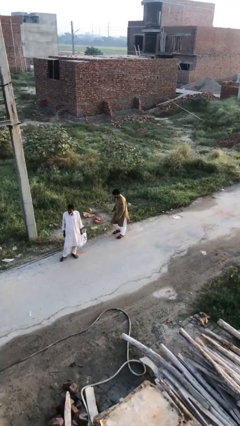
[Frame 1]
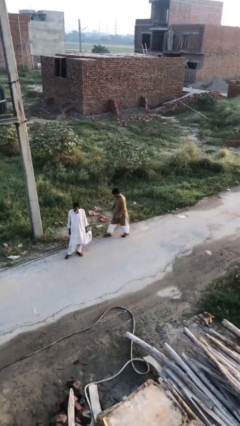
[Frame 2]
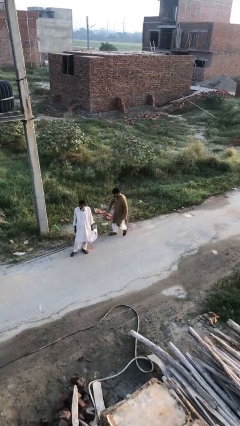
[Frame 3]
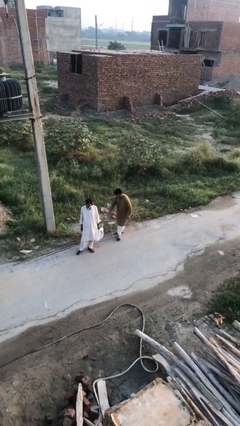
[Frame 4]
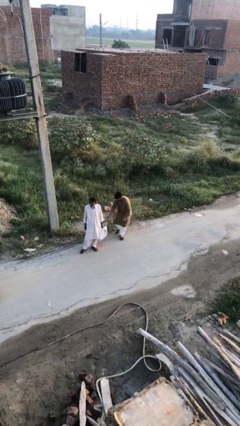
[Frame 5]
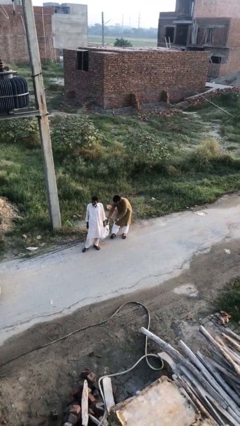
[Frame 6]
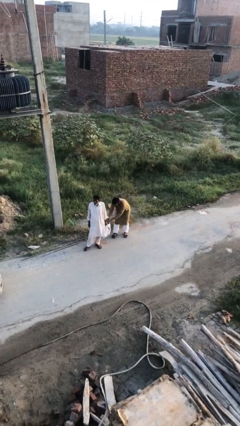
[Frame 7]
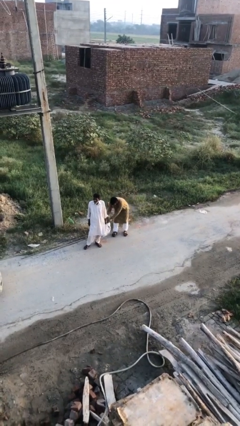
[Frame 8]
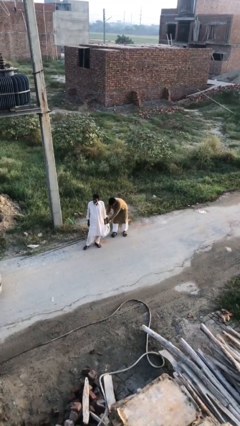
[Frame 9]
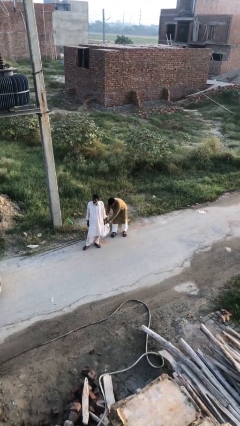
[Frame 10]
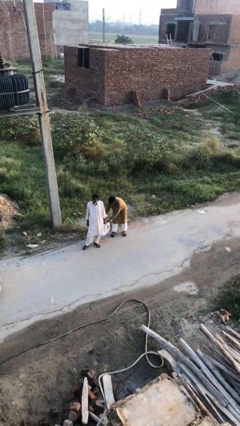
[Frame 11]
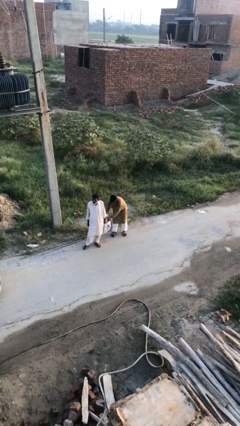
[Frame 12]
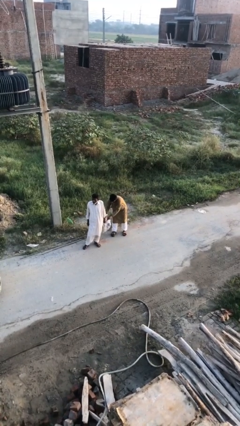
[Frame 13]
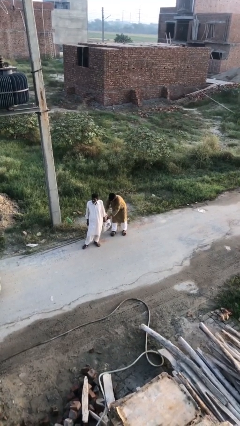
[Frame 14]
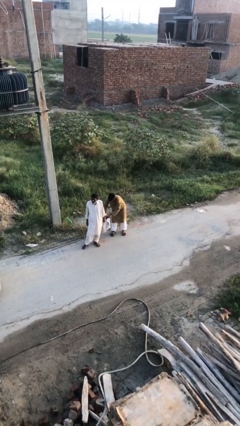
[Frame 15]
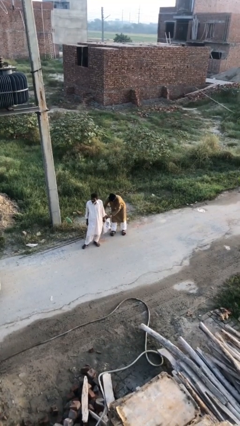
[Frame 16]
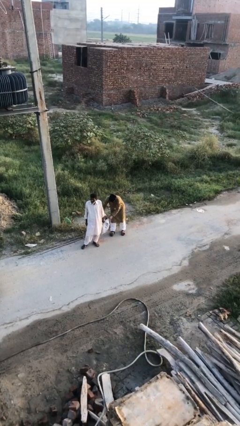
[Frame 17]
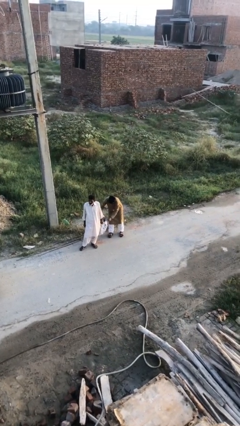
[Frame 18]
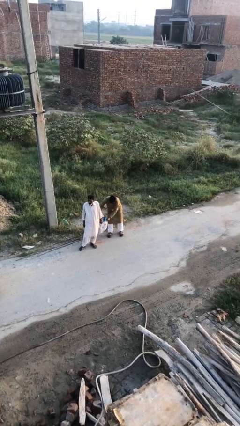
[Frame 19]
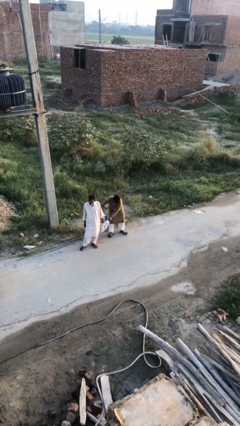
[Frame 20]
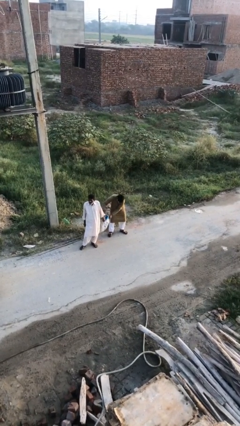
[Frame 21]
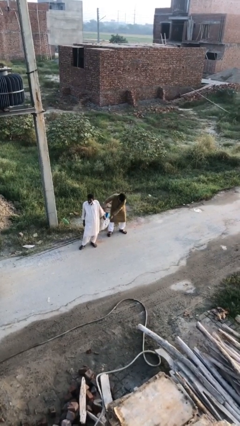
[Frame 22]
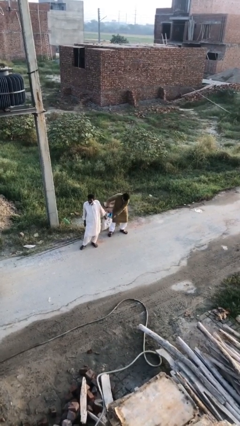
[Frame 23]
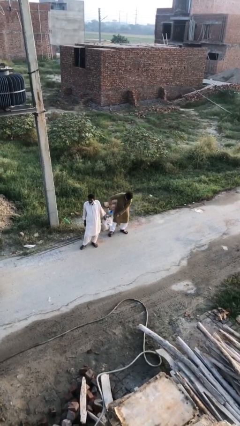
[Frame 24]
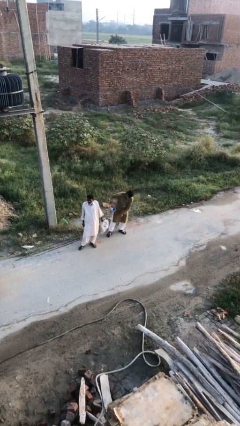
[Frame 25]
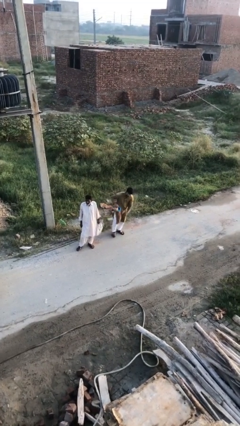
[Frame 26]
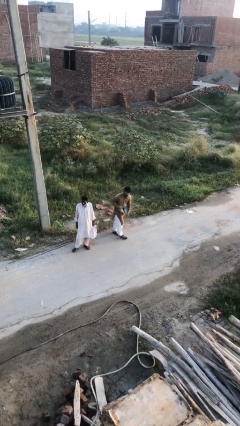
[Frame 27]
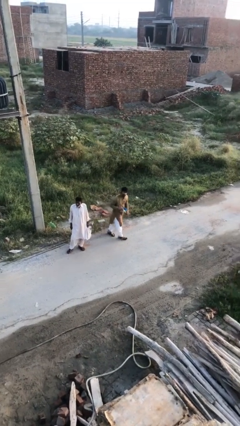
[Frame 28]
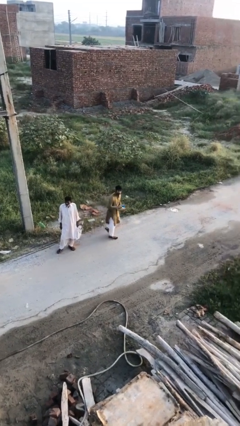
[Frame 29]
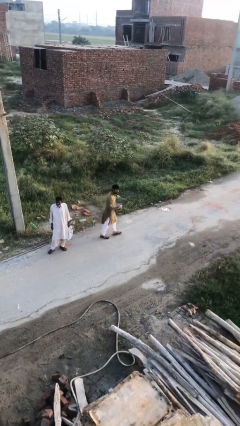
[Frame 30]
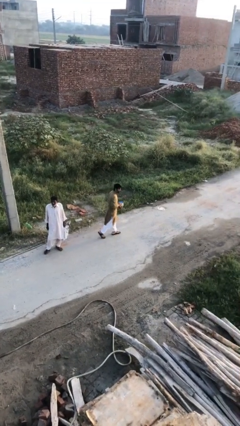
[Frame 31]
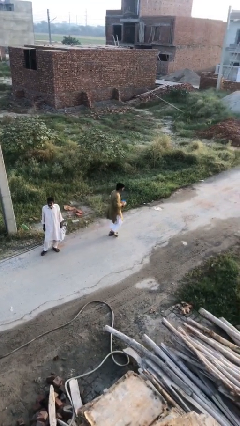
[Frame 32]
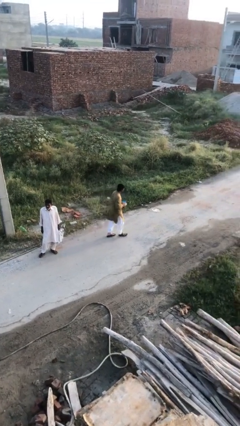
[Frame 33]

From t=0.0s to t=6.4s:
person steals object from person

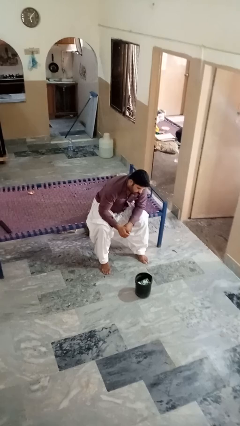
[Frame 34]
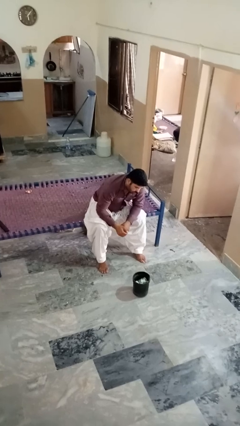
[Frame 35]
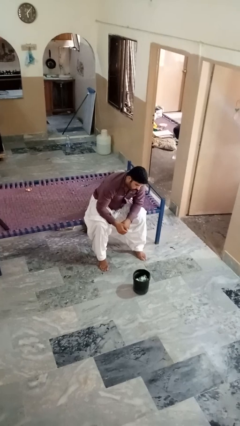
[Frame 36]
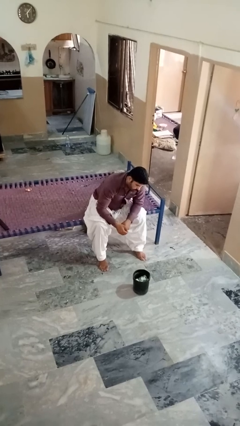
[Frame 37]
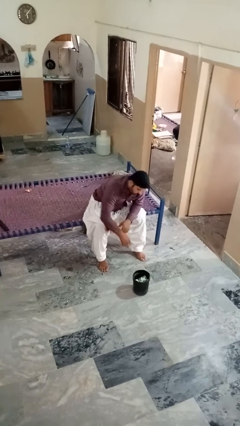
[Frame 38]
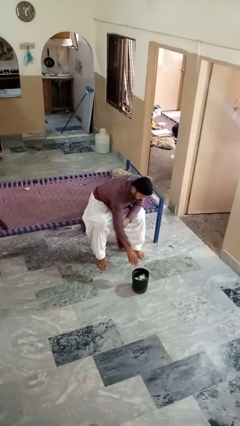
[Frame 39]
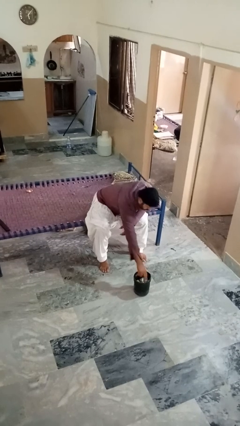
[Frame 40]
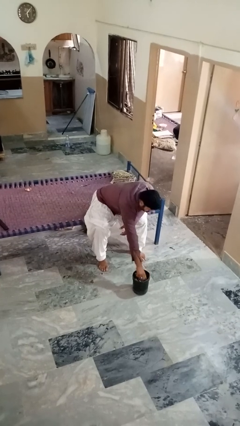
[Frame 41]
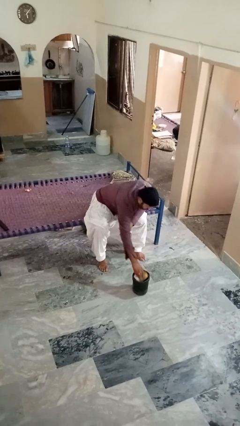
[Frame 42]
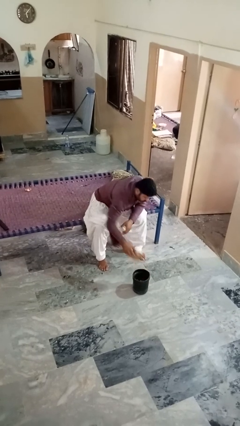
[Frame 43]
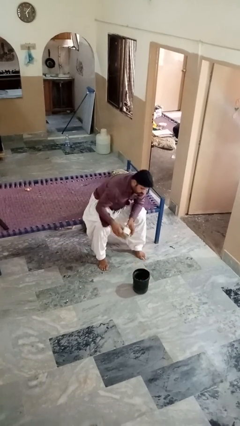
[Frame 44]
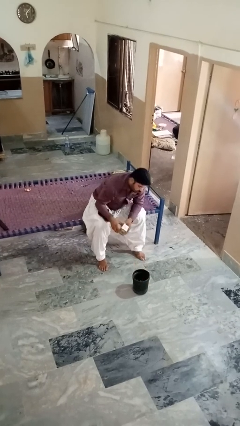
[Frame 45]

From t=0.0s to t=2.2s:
person takes object from basket

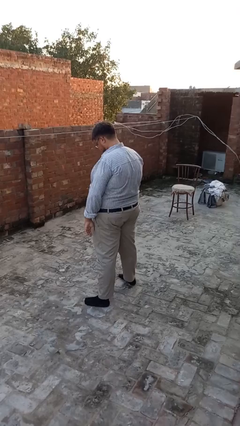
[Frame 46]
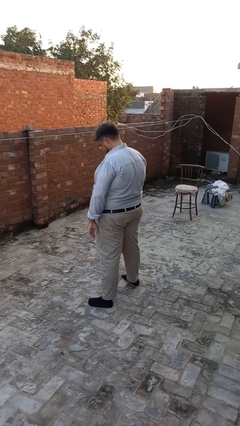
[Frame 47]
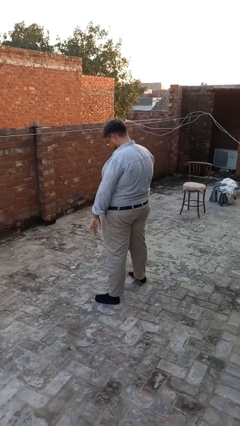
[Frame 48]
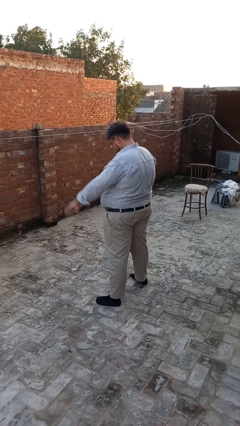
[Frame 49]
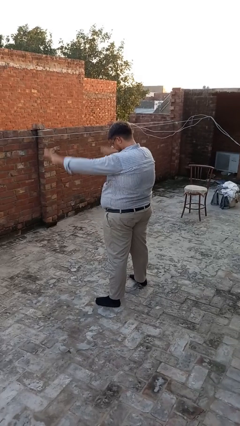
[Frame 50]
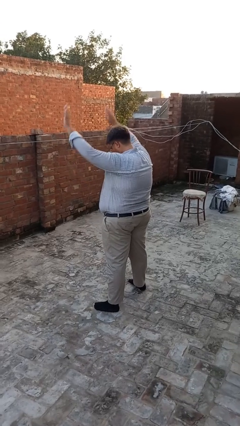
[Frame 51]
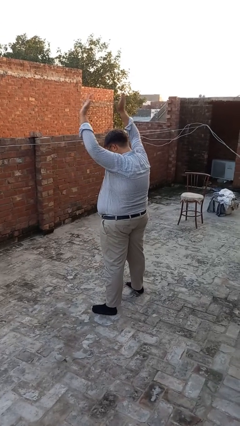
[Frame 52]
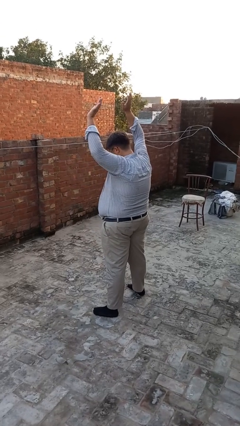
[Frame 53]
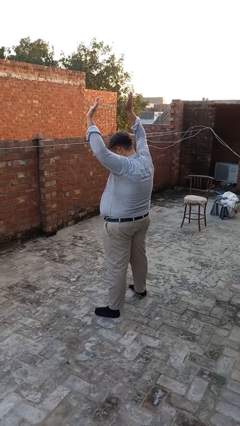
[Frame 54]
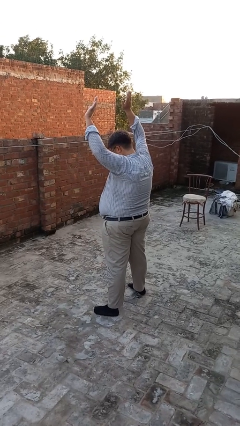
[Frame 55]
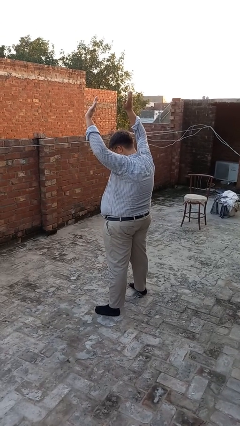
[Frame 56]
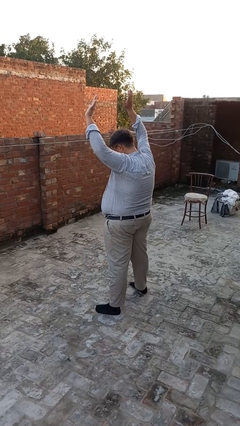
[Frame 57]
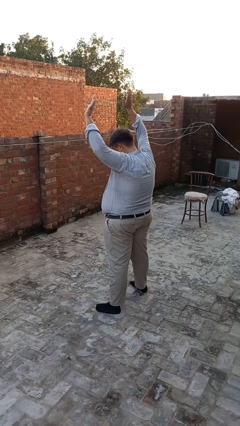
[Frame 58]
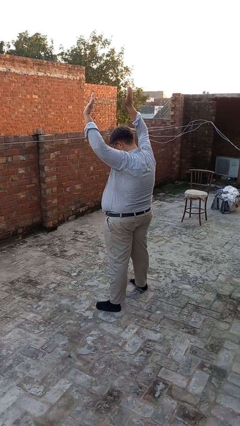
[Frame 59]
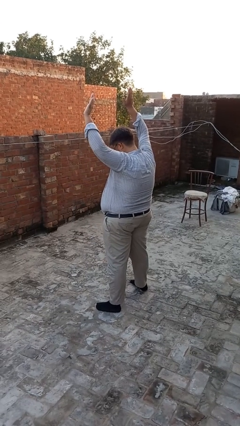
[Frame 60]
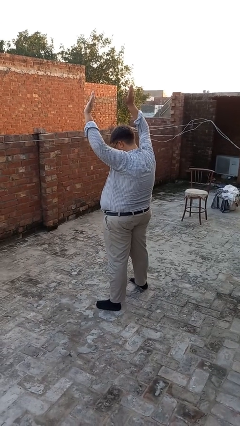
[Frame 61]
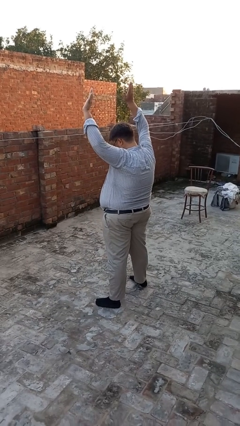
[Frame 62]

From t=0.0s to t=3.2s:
person gestures swipe up

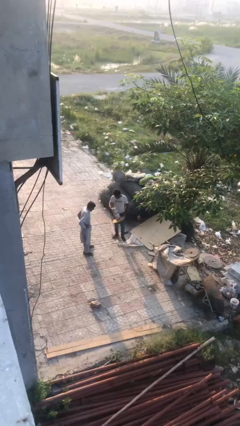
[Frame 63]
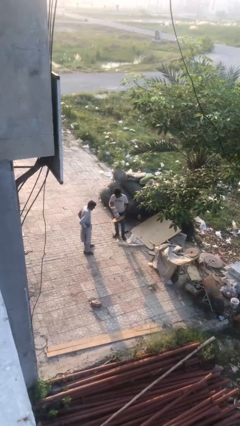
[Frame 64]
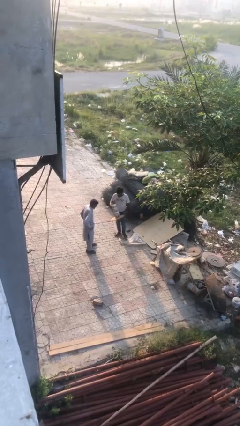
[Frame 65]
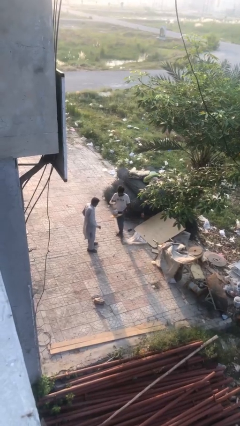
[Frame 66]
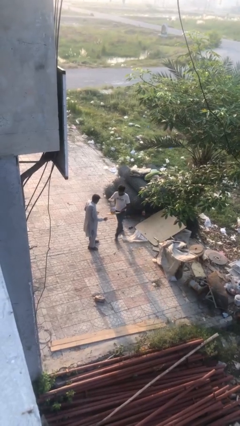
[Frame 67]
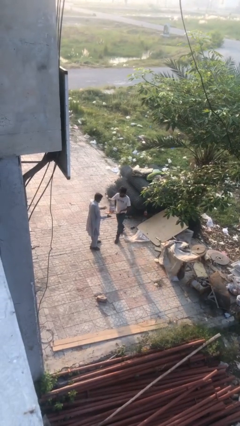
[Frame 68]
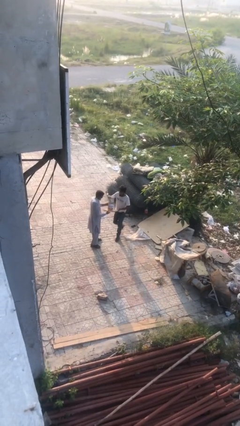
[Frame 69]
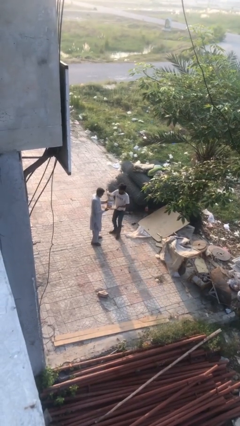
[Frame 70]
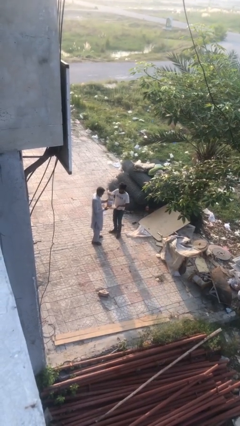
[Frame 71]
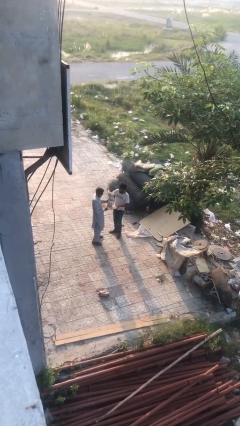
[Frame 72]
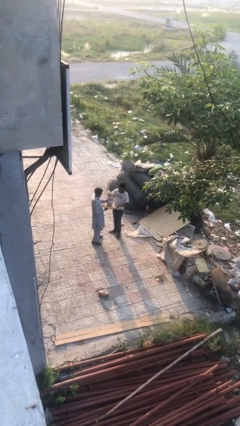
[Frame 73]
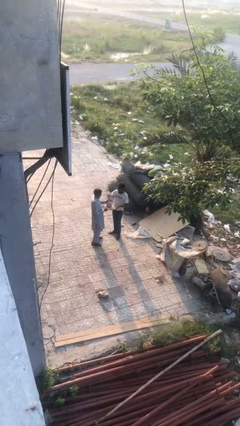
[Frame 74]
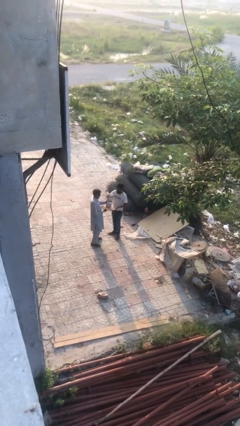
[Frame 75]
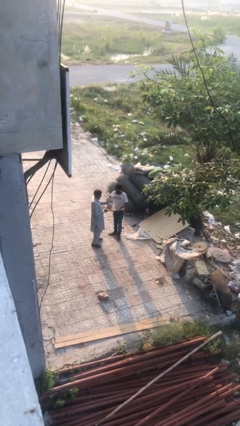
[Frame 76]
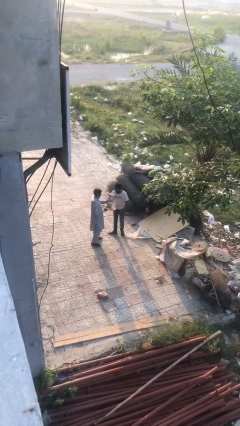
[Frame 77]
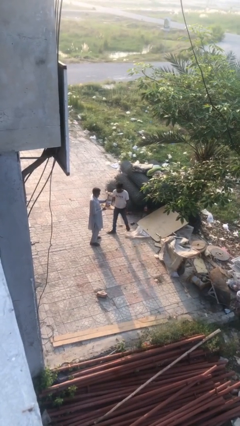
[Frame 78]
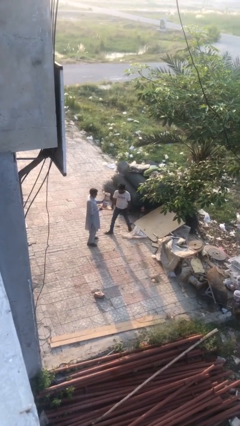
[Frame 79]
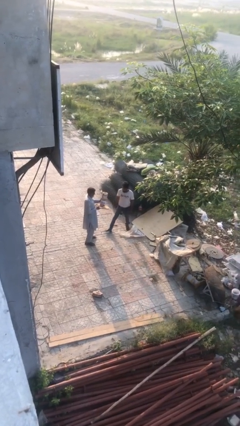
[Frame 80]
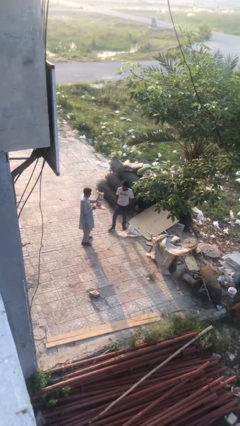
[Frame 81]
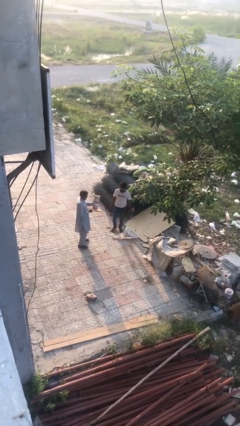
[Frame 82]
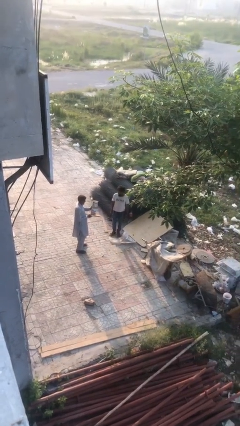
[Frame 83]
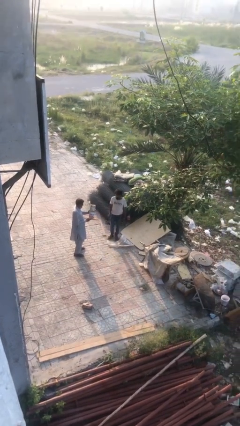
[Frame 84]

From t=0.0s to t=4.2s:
person transfers object to person

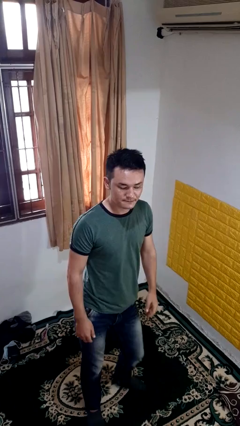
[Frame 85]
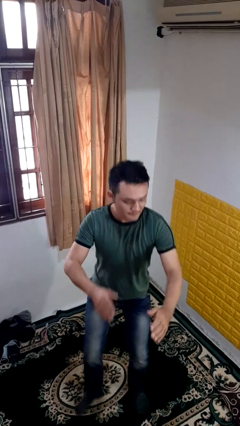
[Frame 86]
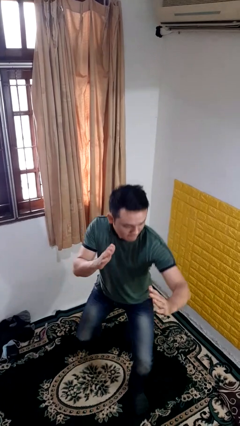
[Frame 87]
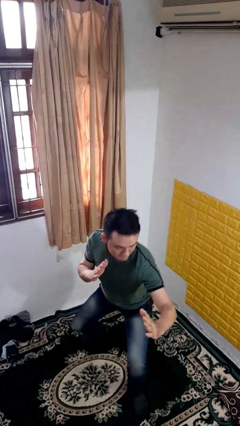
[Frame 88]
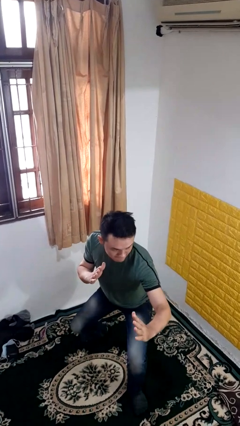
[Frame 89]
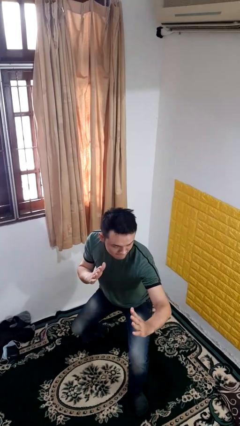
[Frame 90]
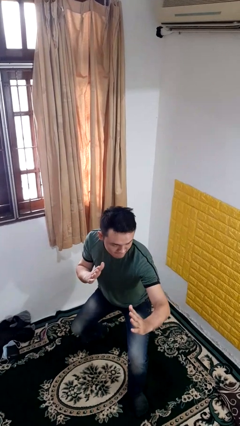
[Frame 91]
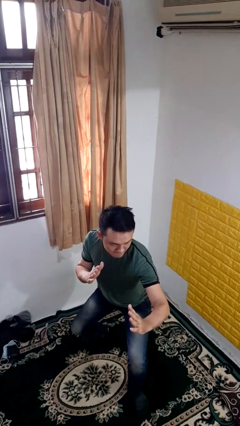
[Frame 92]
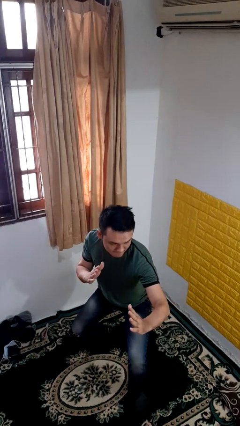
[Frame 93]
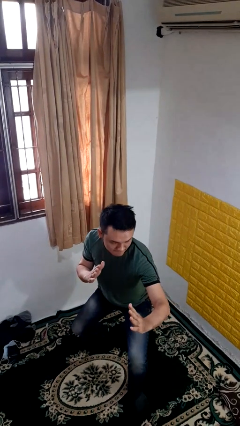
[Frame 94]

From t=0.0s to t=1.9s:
person karate chop
